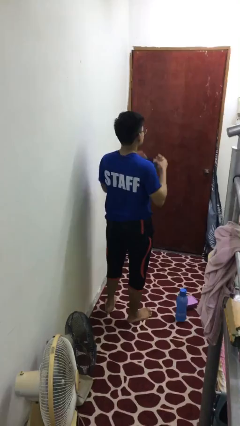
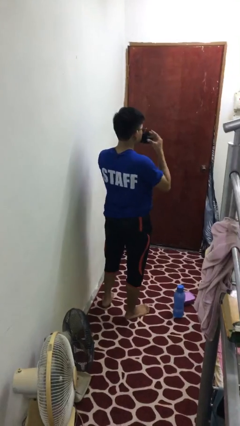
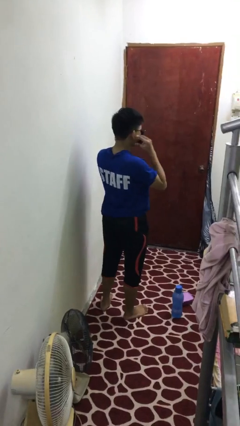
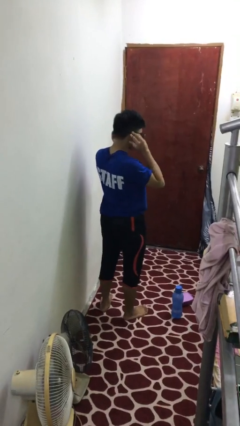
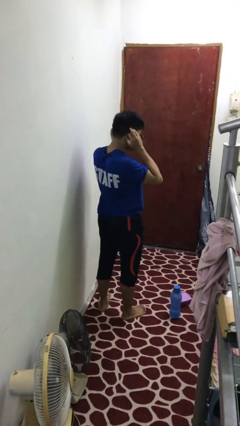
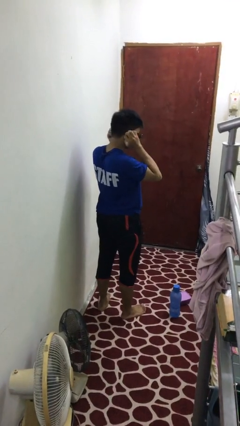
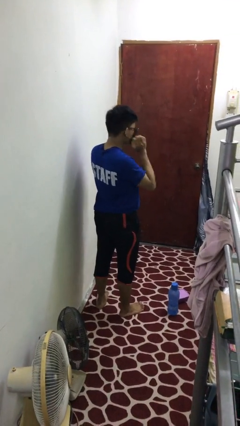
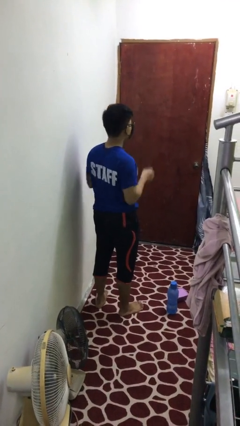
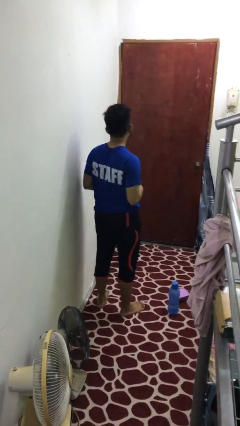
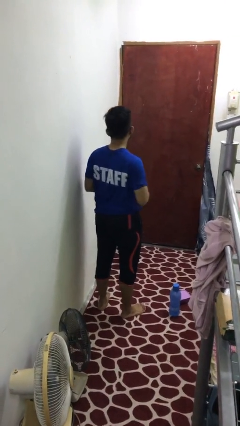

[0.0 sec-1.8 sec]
person puts on facemask

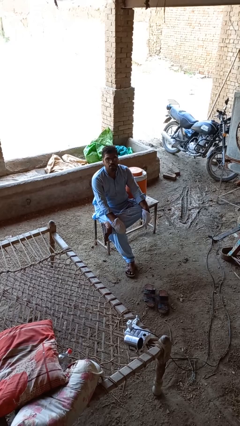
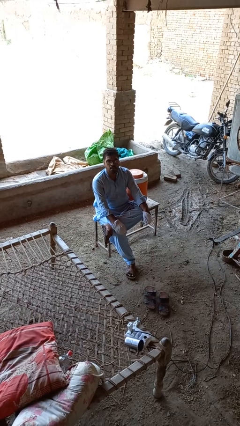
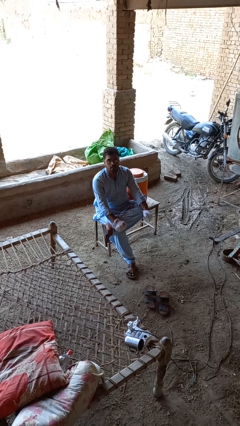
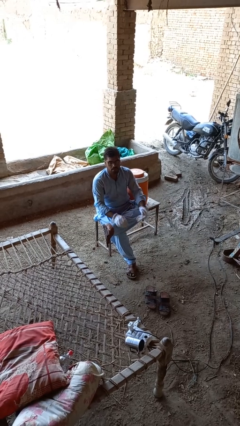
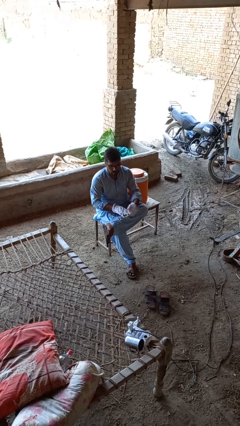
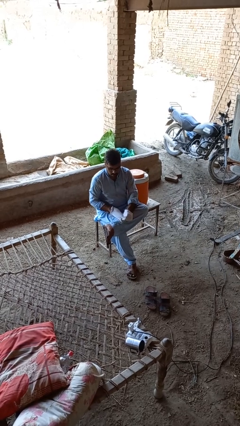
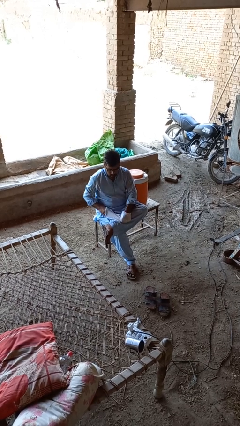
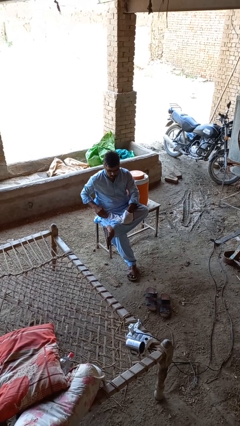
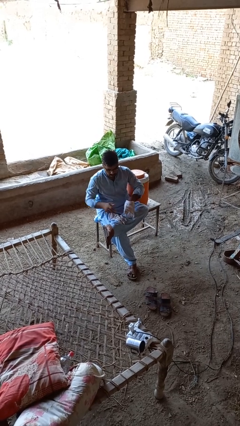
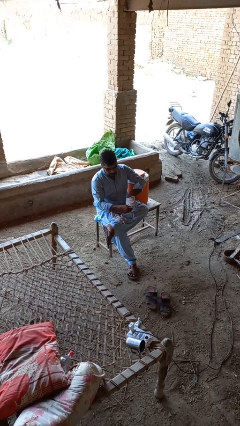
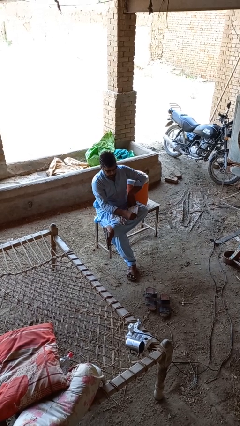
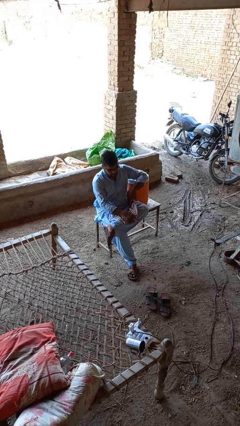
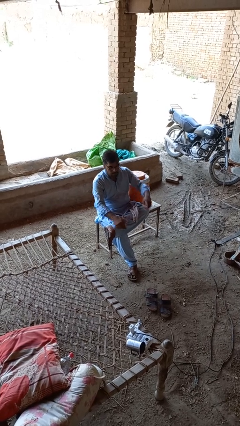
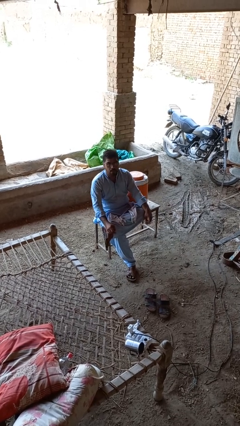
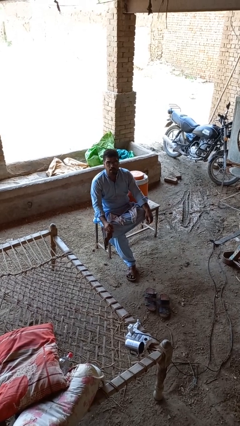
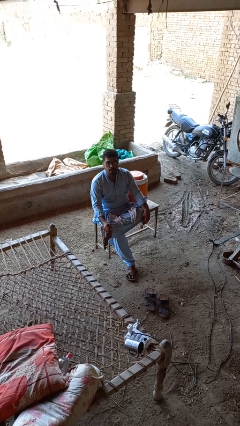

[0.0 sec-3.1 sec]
person takes off gloves

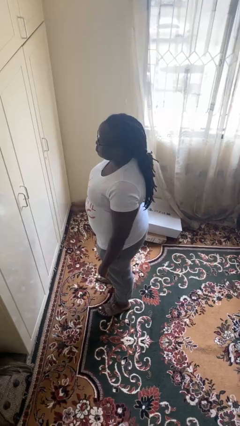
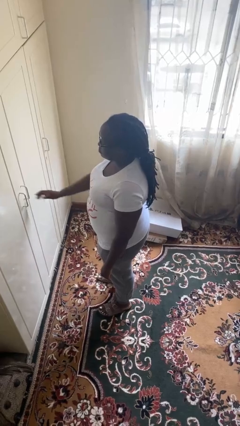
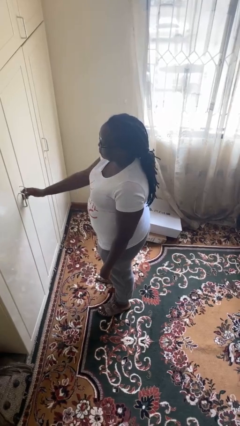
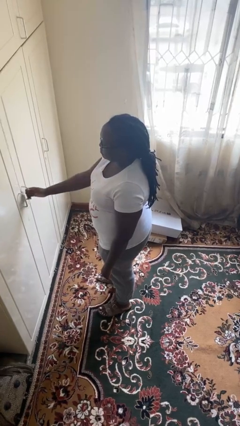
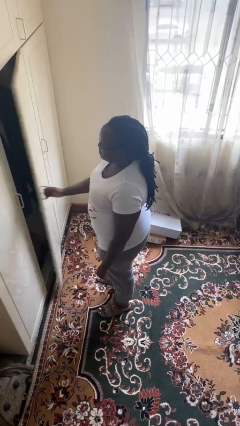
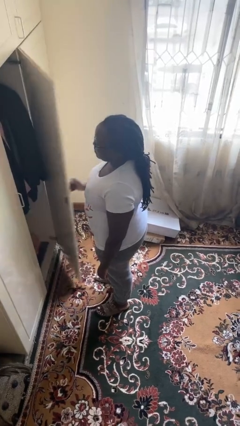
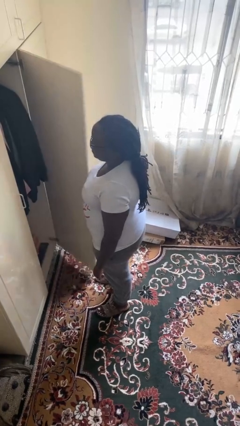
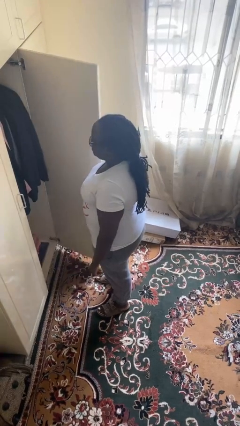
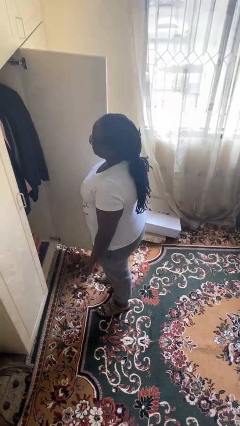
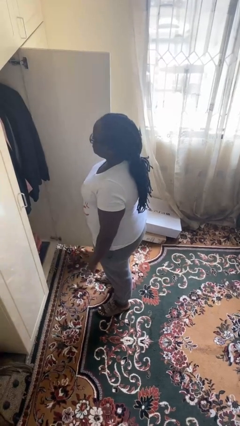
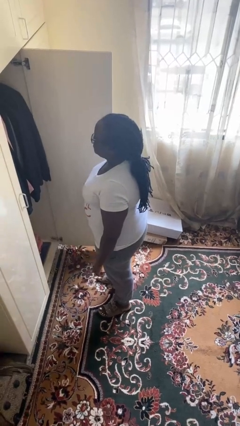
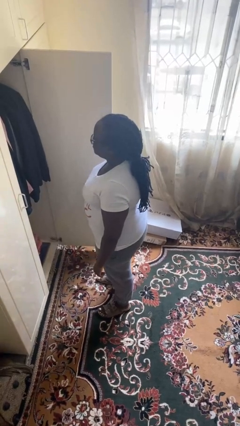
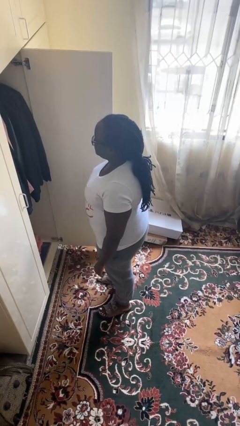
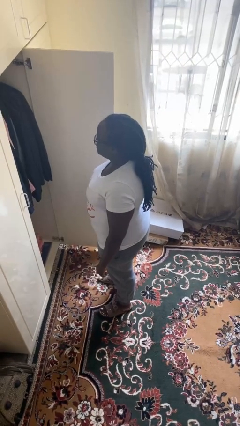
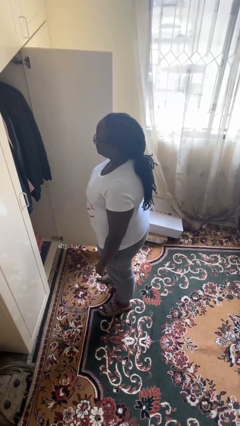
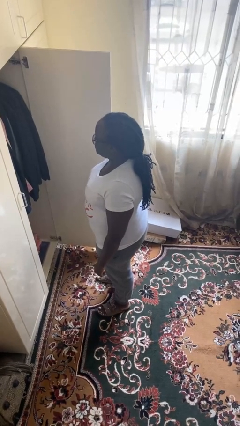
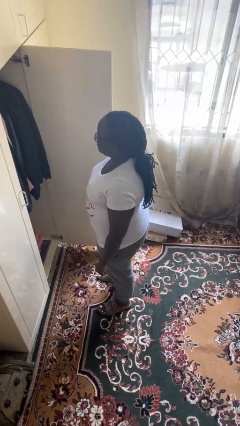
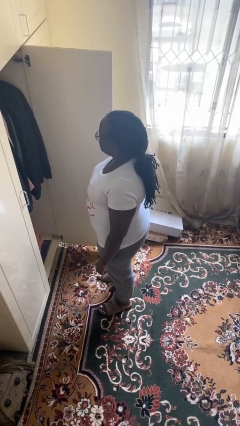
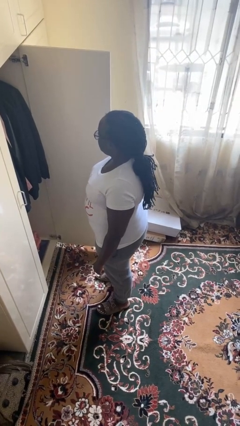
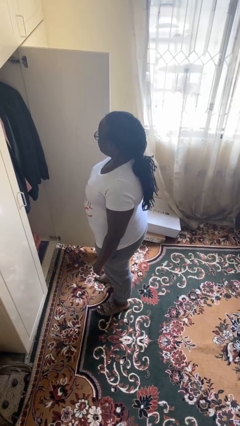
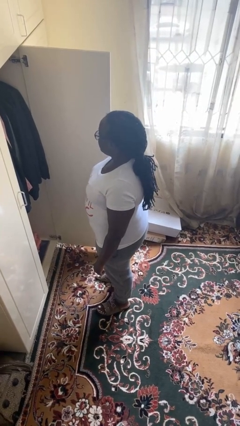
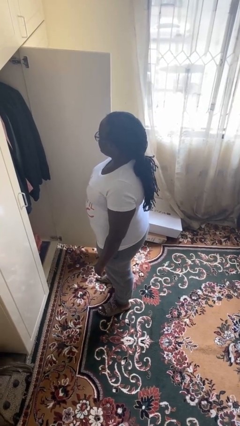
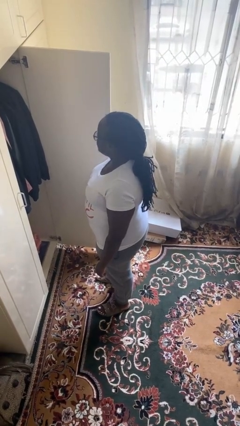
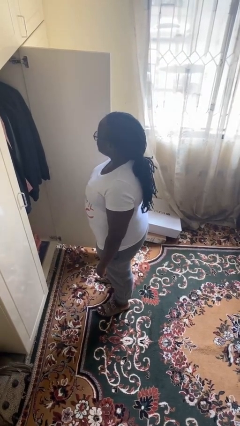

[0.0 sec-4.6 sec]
person opens closet door

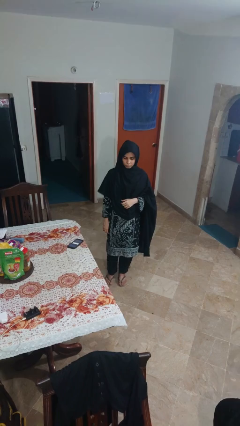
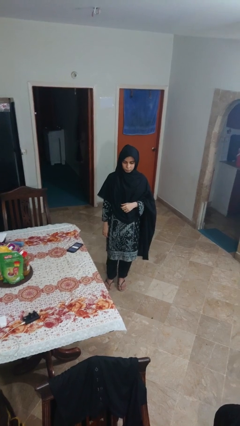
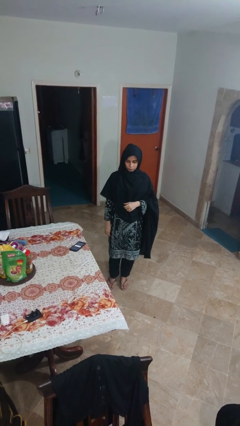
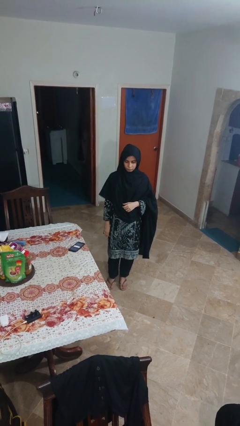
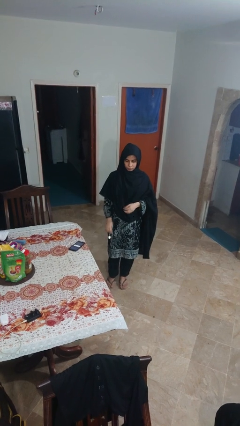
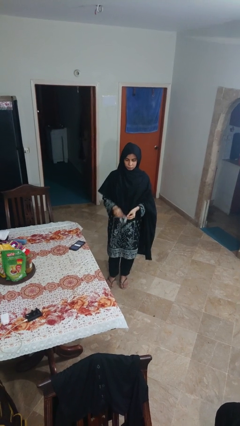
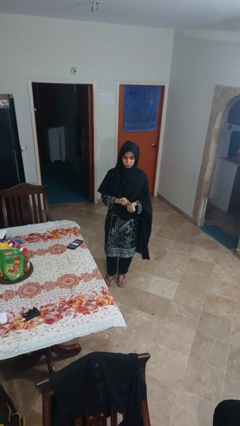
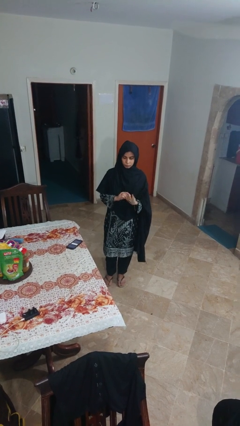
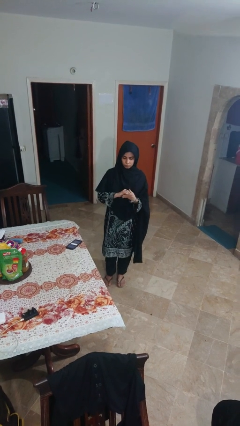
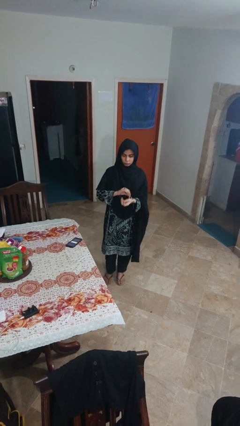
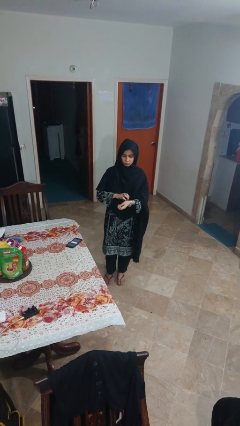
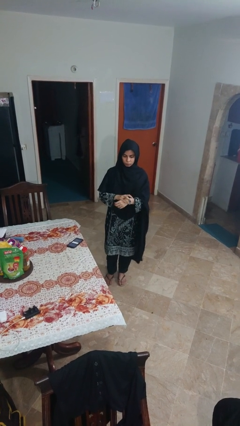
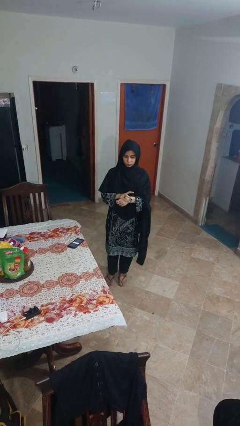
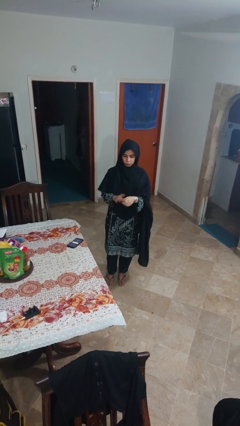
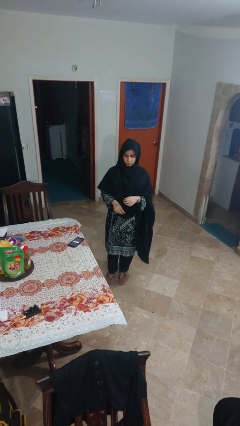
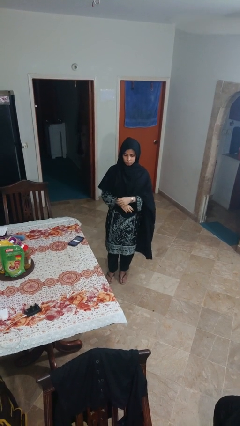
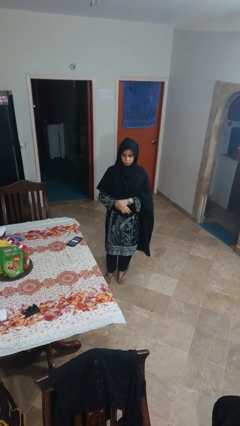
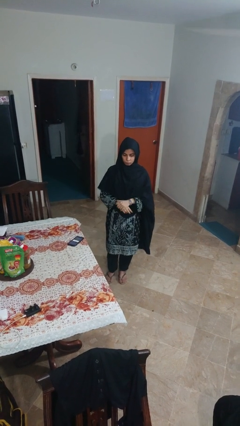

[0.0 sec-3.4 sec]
person puts on wristwatch

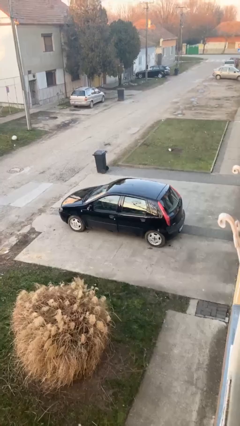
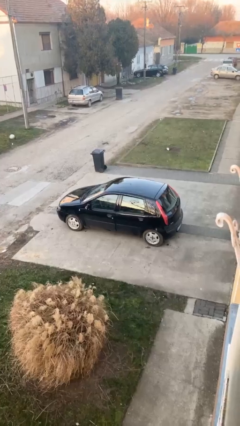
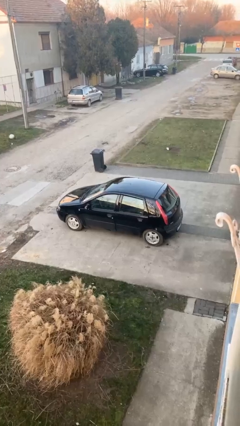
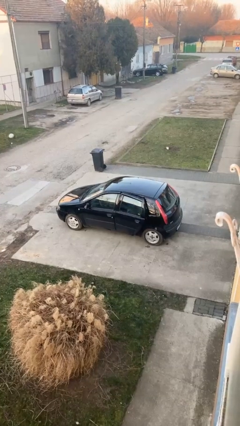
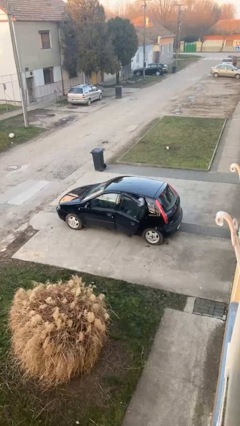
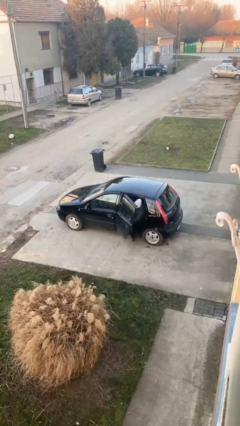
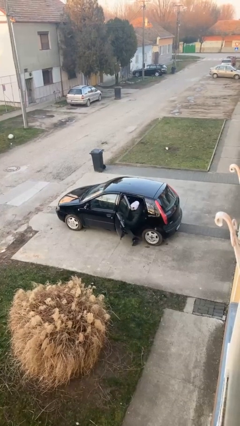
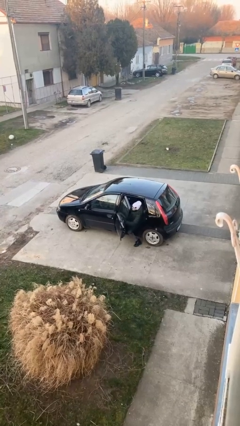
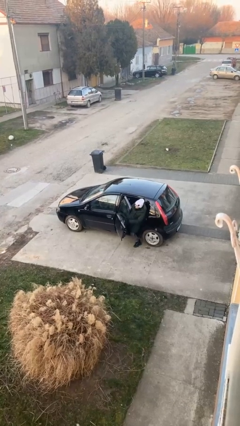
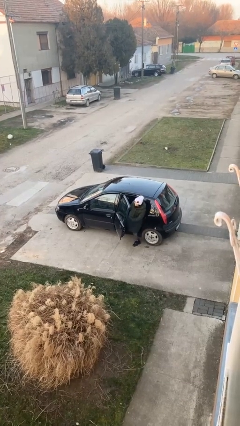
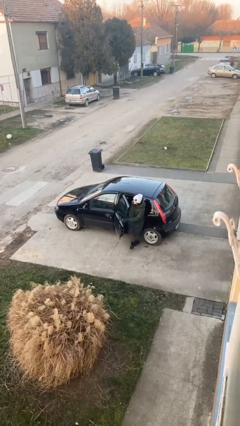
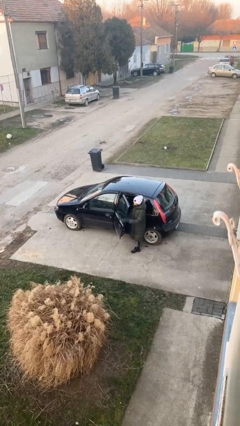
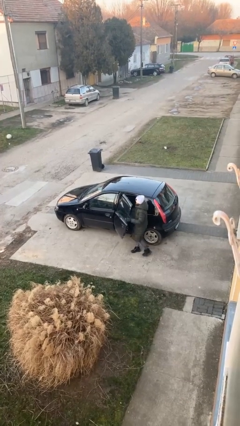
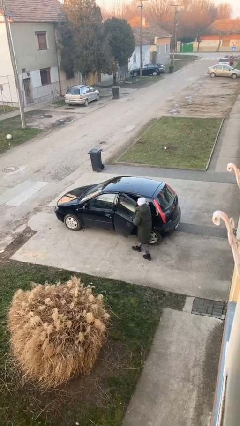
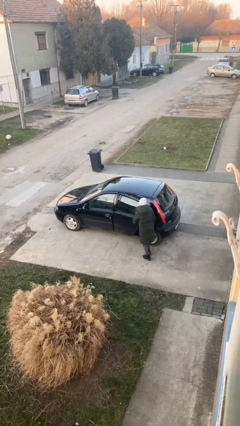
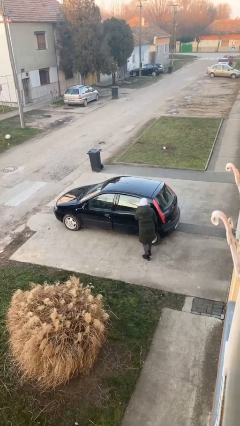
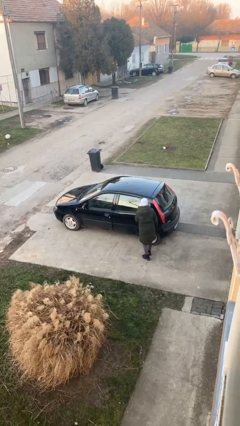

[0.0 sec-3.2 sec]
car drops off person

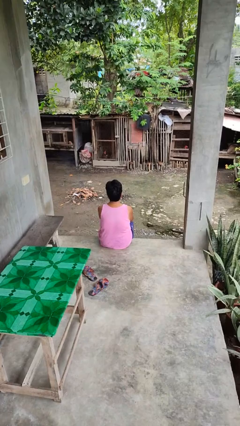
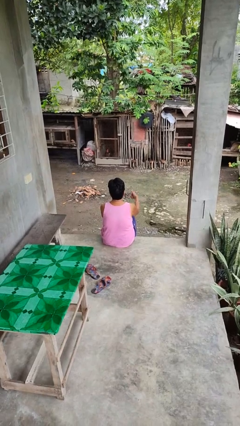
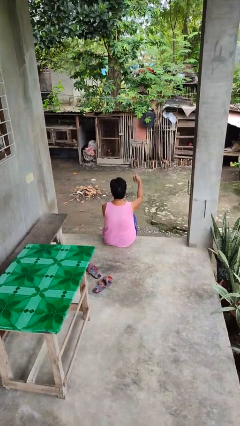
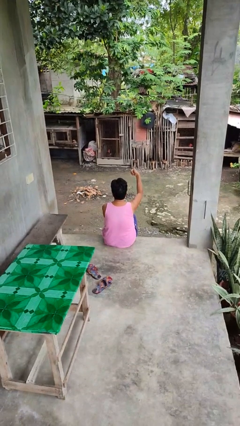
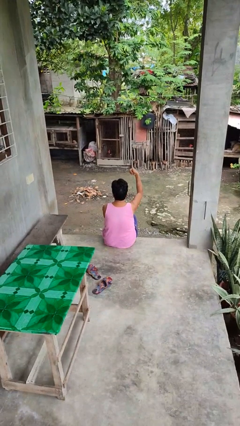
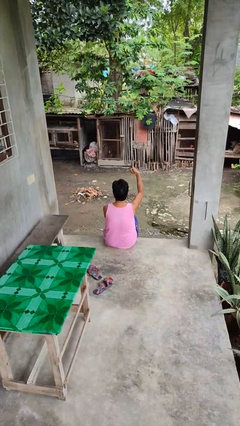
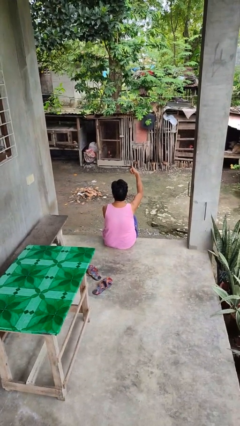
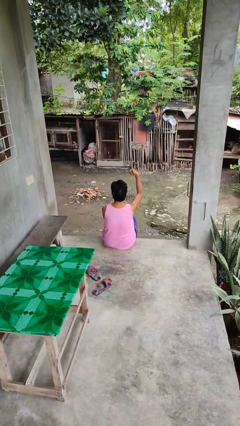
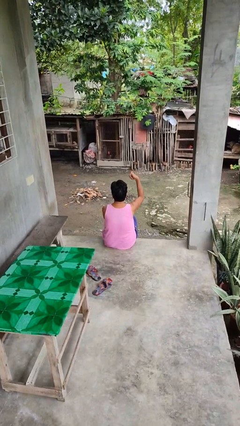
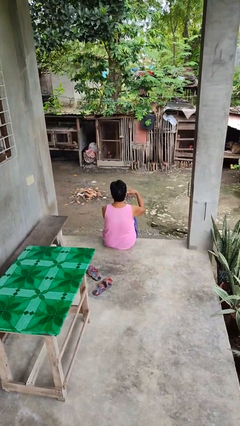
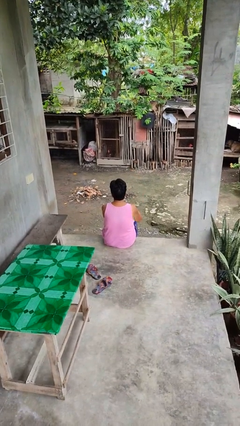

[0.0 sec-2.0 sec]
person gestures thumbs up
